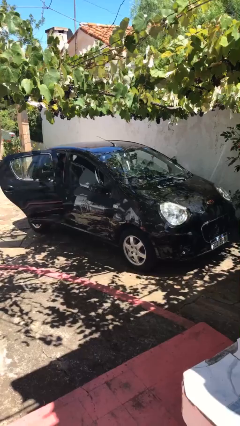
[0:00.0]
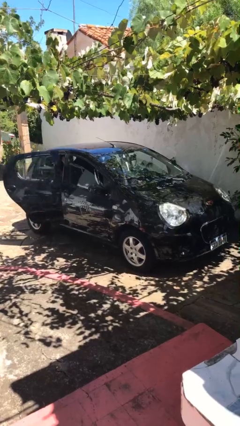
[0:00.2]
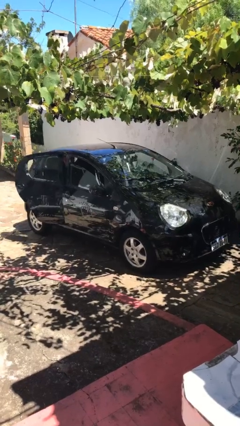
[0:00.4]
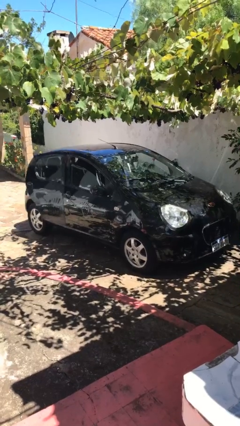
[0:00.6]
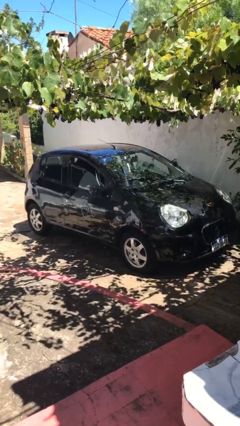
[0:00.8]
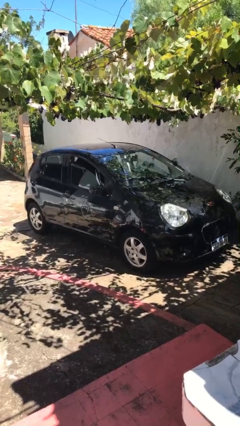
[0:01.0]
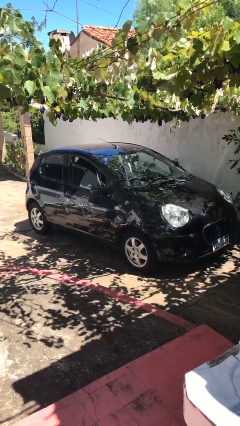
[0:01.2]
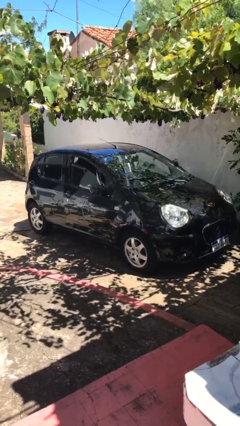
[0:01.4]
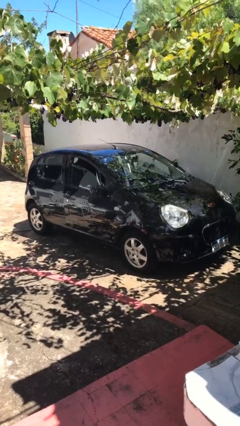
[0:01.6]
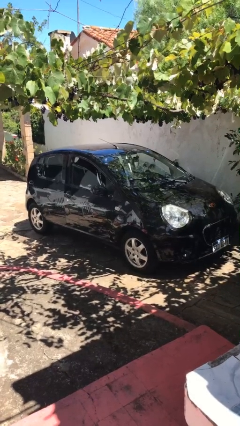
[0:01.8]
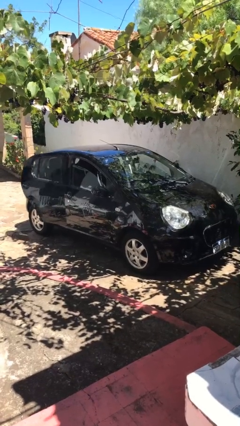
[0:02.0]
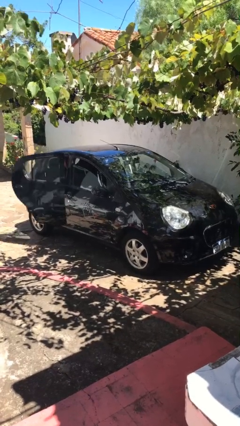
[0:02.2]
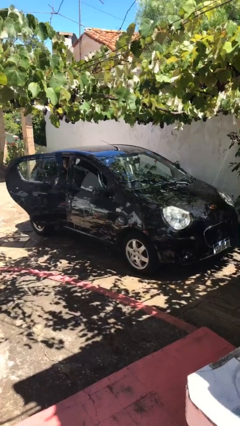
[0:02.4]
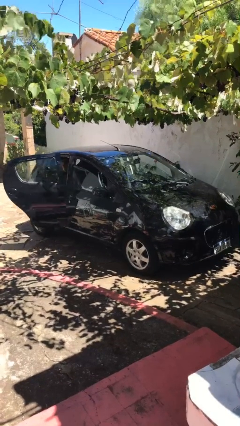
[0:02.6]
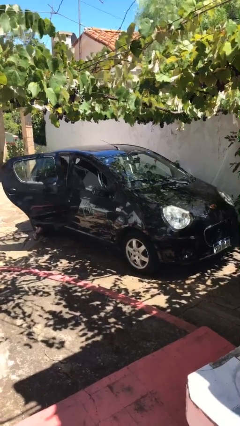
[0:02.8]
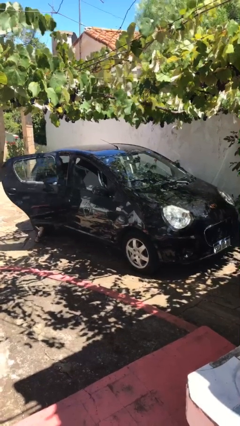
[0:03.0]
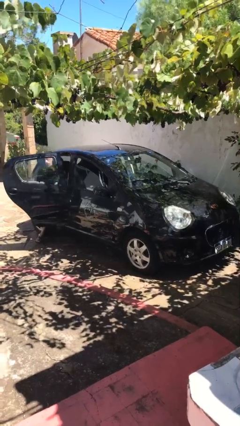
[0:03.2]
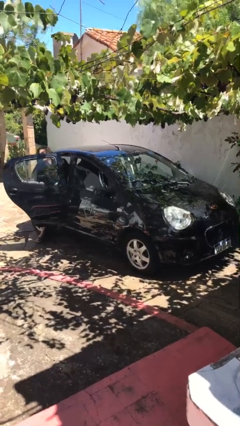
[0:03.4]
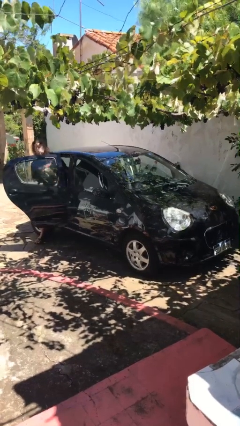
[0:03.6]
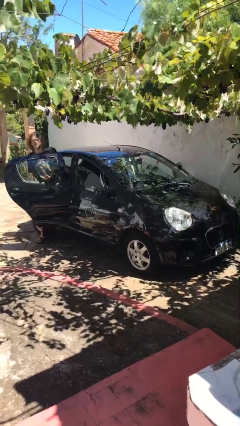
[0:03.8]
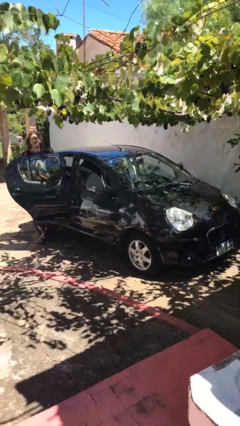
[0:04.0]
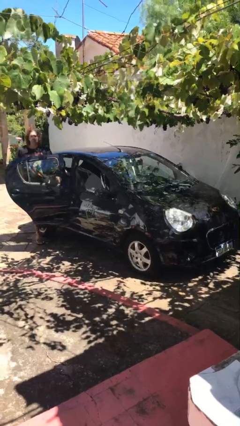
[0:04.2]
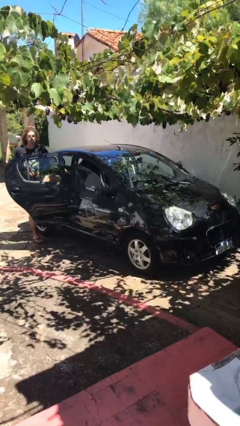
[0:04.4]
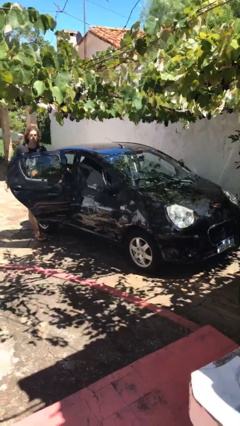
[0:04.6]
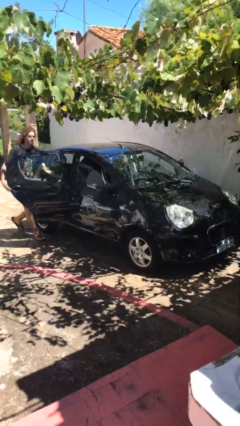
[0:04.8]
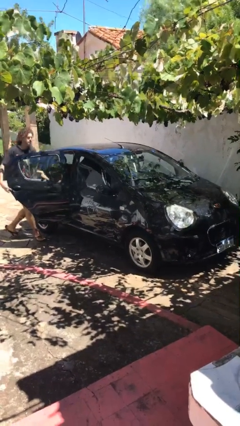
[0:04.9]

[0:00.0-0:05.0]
car drops off person

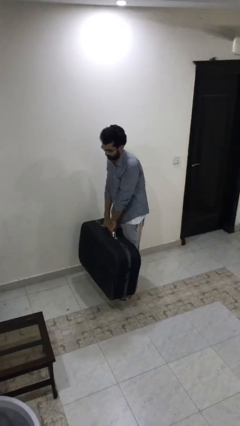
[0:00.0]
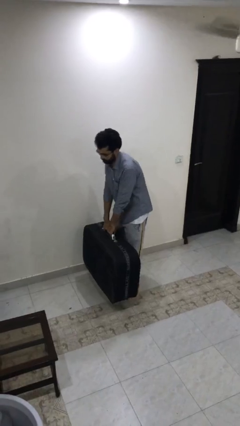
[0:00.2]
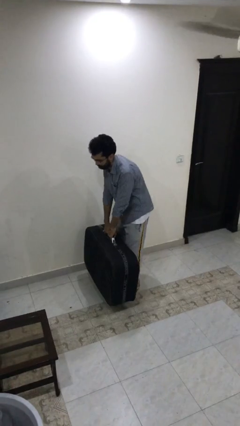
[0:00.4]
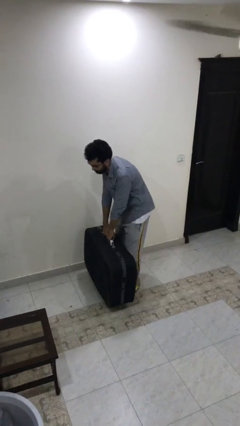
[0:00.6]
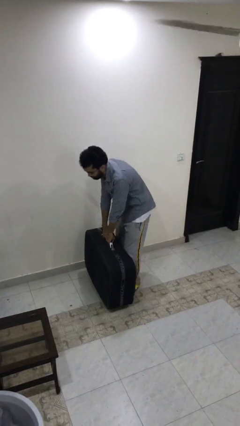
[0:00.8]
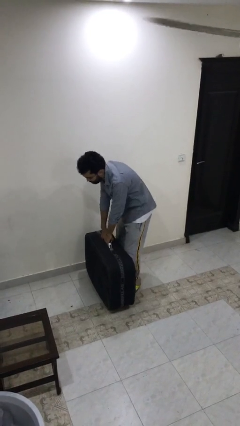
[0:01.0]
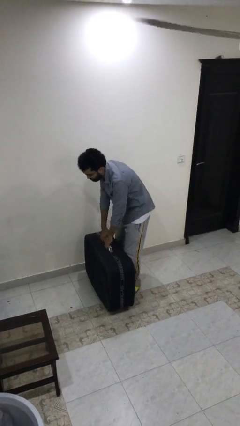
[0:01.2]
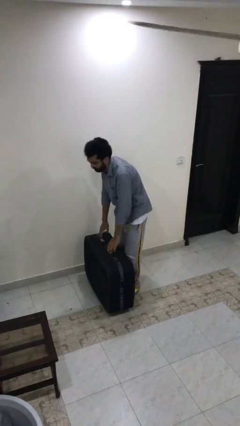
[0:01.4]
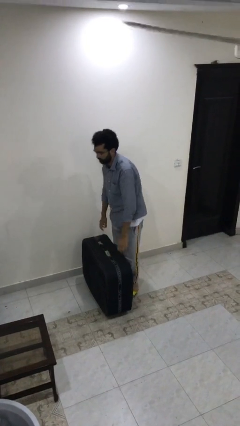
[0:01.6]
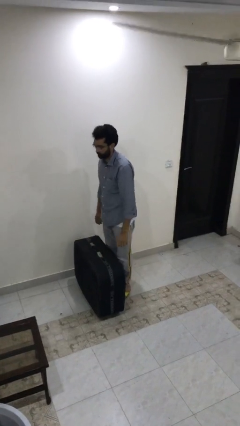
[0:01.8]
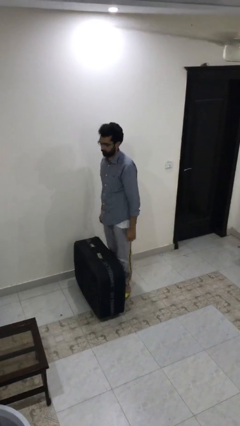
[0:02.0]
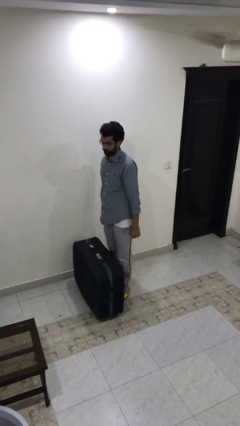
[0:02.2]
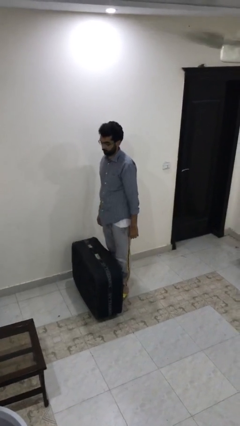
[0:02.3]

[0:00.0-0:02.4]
person puts down object on floor

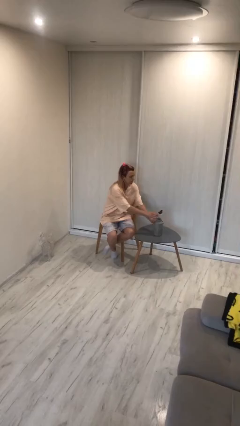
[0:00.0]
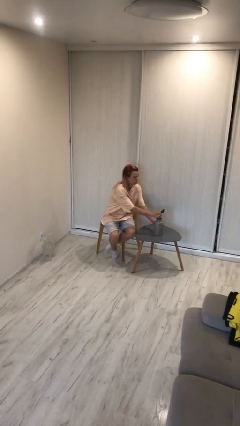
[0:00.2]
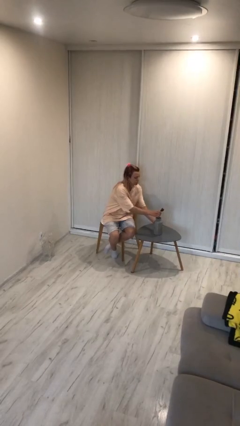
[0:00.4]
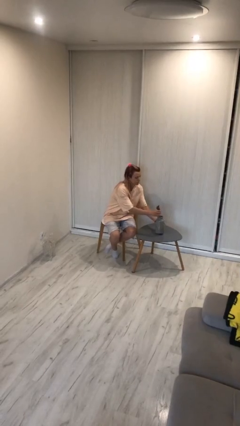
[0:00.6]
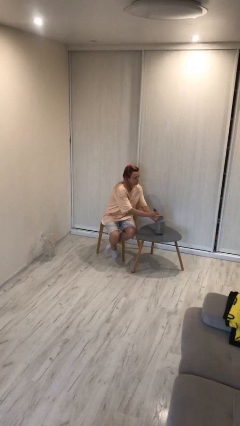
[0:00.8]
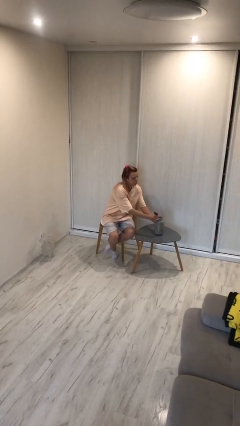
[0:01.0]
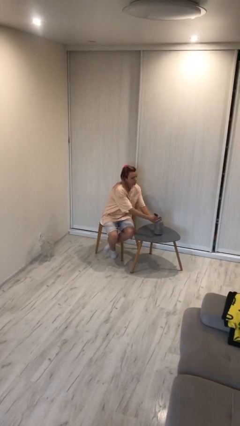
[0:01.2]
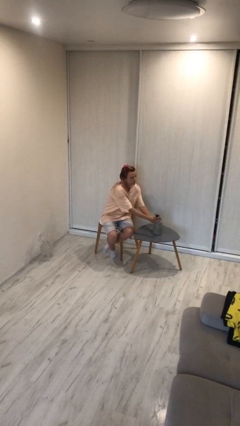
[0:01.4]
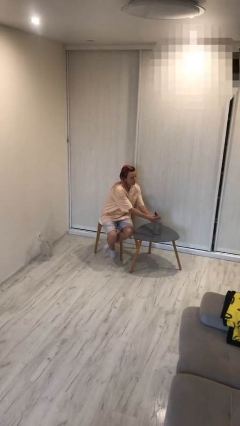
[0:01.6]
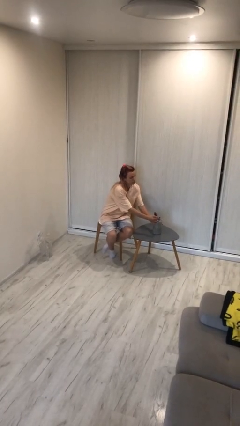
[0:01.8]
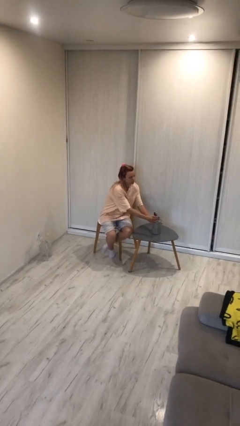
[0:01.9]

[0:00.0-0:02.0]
person arranges flowers in vase

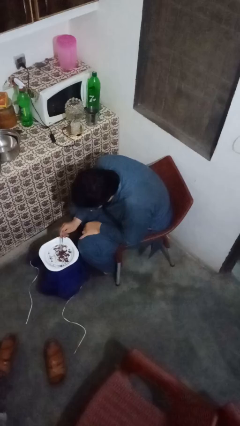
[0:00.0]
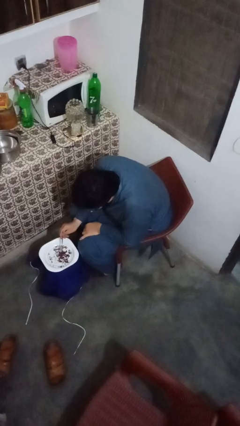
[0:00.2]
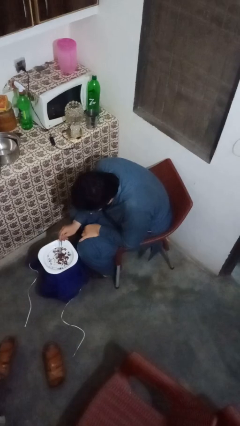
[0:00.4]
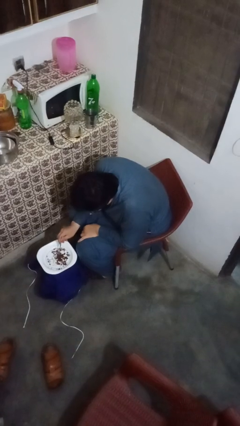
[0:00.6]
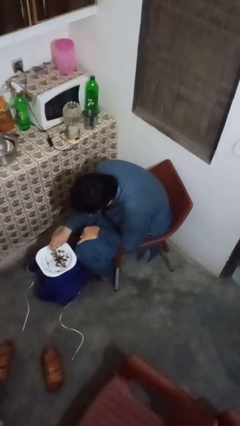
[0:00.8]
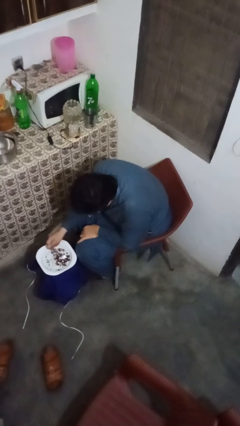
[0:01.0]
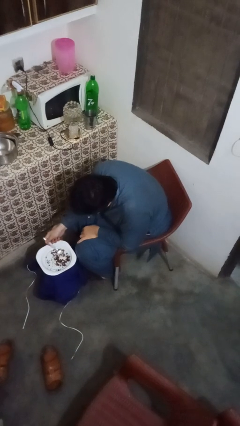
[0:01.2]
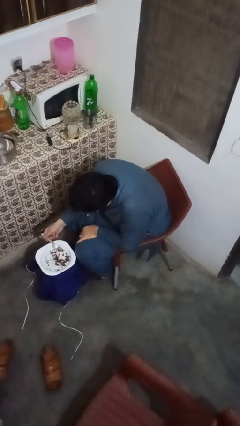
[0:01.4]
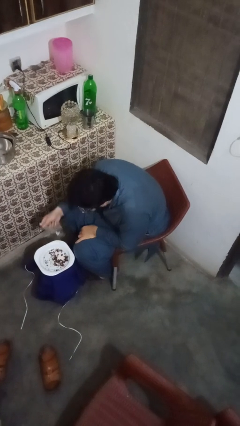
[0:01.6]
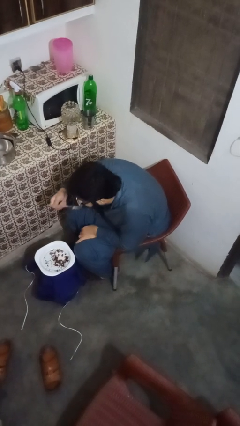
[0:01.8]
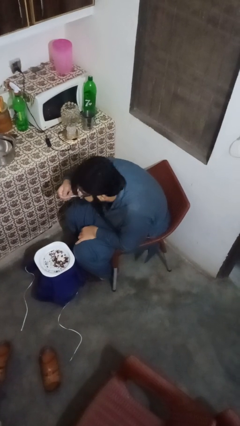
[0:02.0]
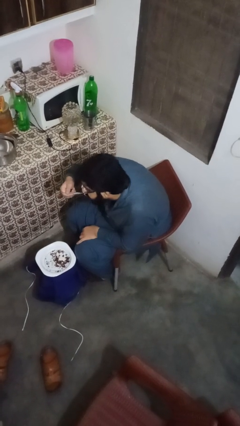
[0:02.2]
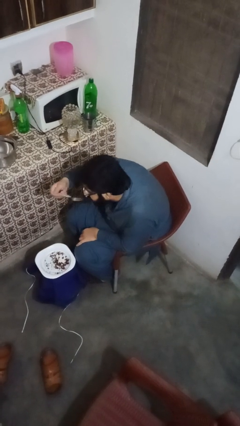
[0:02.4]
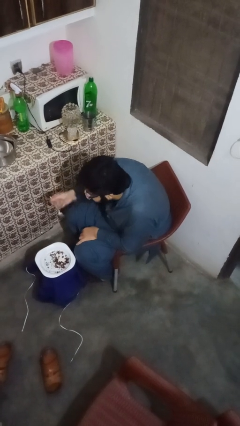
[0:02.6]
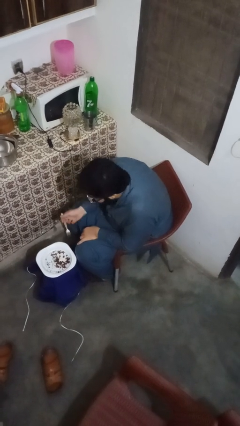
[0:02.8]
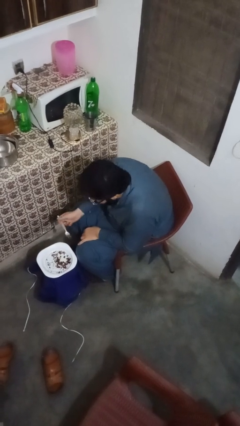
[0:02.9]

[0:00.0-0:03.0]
person eats with utensil

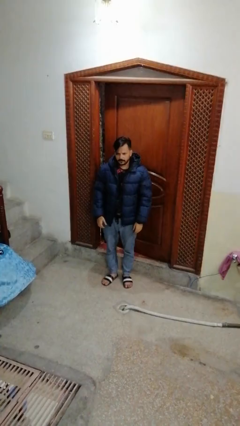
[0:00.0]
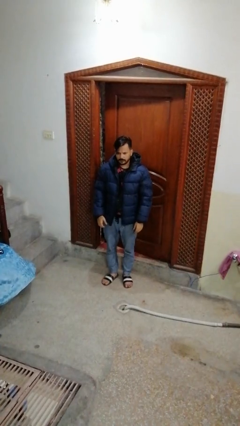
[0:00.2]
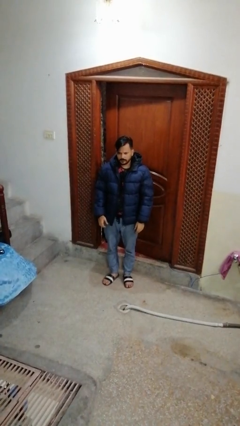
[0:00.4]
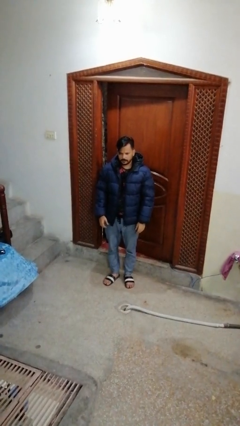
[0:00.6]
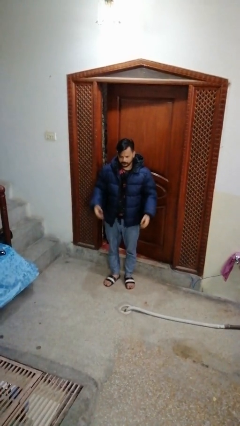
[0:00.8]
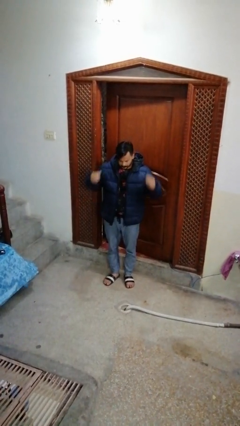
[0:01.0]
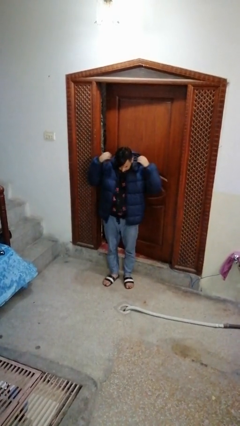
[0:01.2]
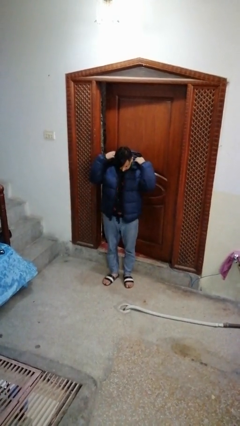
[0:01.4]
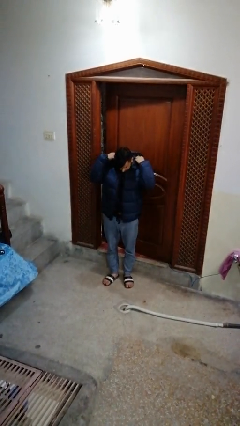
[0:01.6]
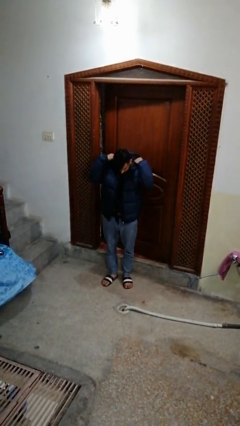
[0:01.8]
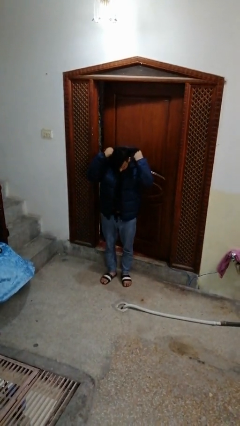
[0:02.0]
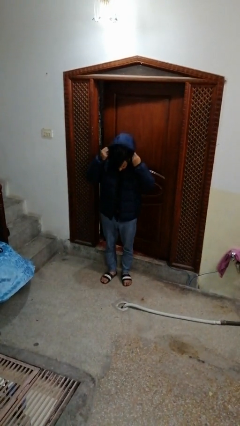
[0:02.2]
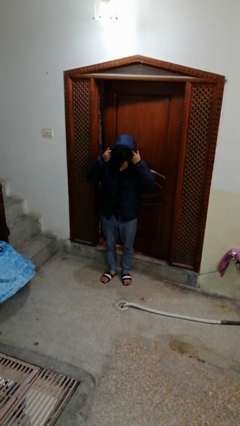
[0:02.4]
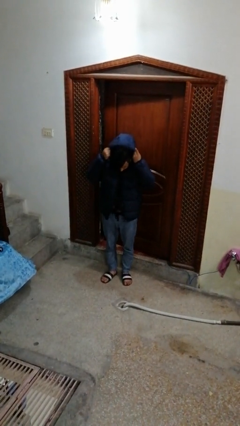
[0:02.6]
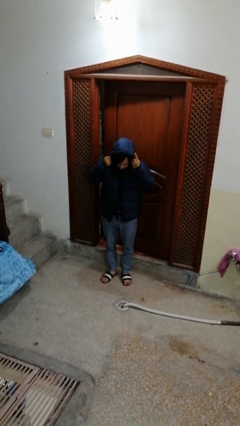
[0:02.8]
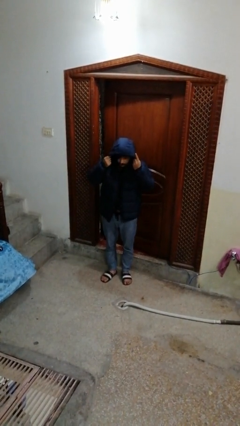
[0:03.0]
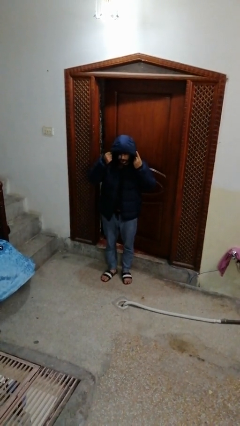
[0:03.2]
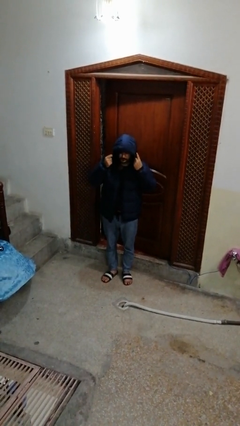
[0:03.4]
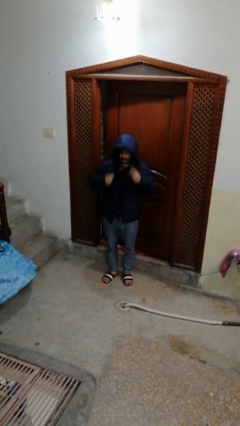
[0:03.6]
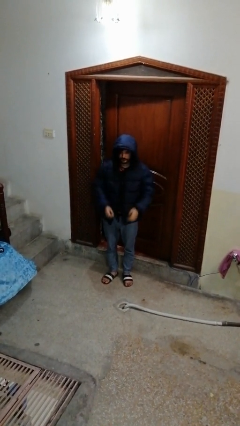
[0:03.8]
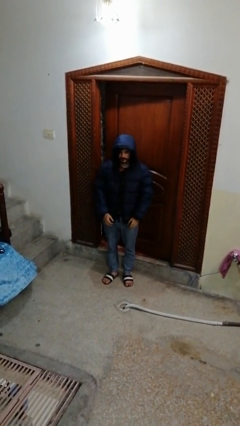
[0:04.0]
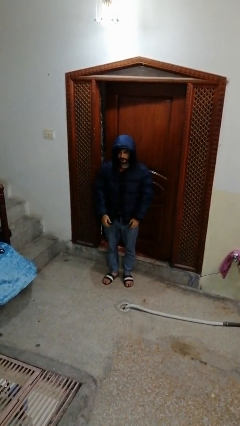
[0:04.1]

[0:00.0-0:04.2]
person puts on hoodie

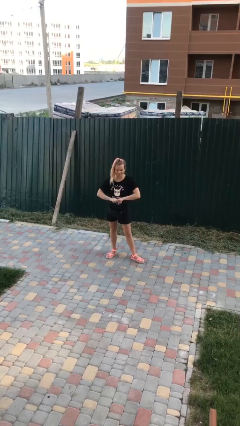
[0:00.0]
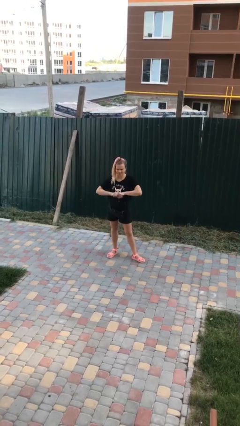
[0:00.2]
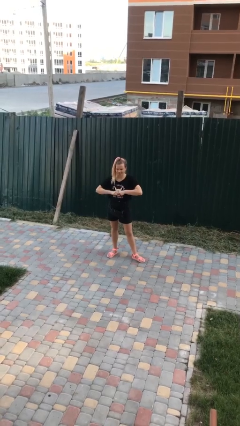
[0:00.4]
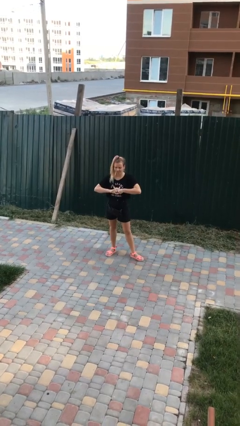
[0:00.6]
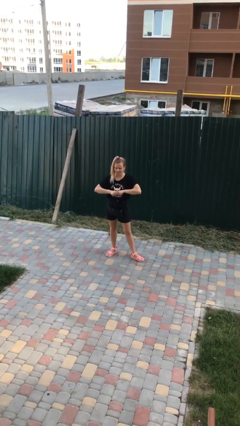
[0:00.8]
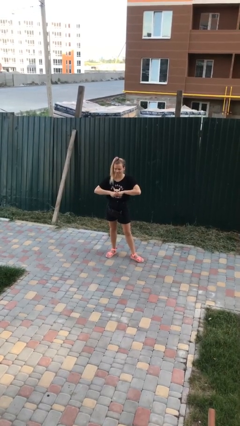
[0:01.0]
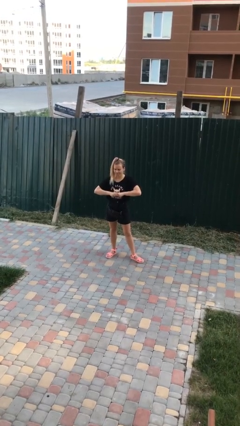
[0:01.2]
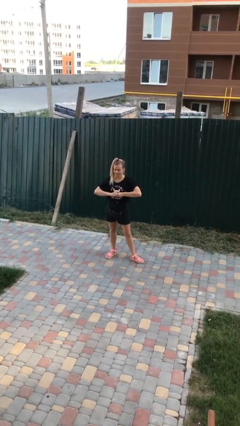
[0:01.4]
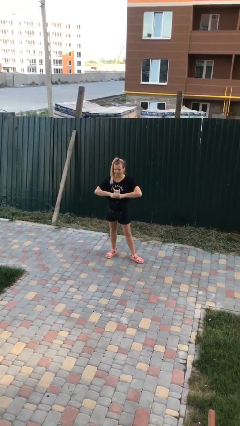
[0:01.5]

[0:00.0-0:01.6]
person cracks knuckles
